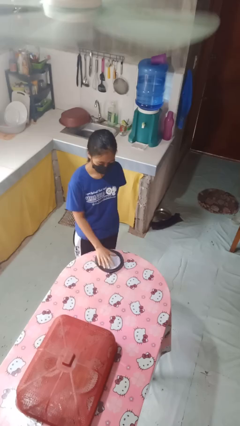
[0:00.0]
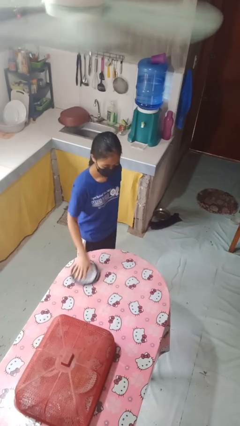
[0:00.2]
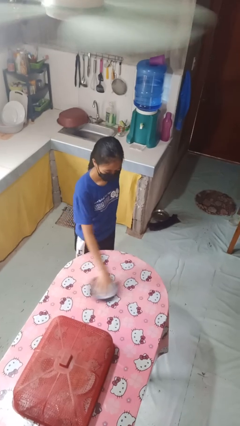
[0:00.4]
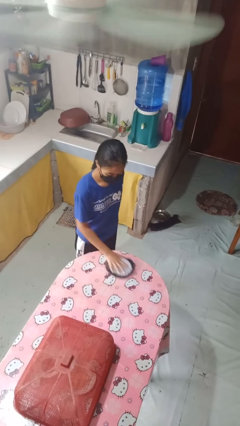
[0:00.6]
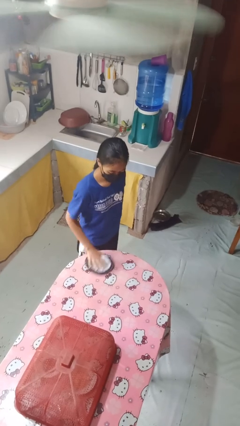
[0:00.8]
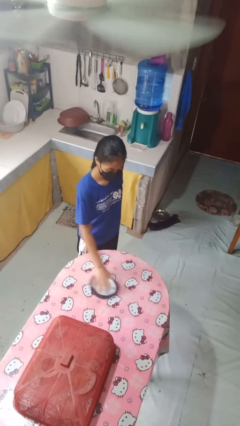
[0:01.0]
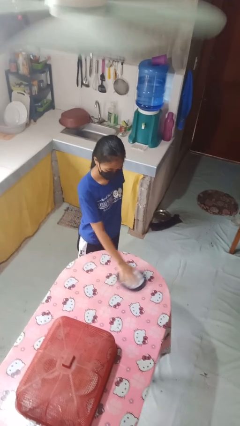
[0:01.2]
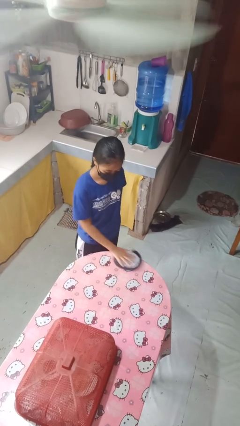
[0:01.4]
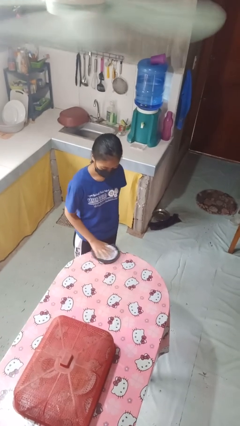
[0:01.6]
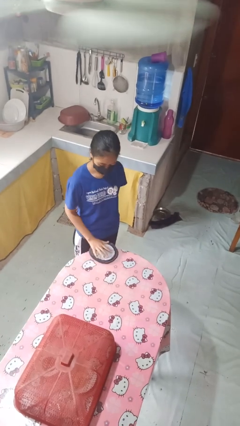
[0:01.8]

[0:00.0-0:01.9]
person cleans table with rag

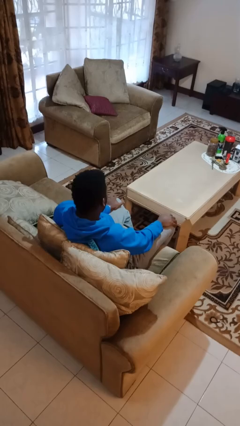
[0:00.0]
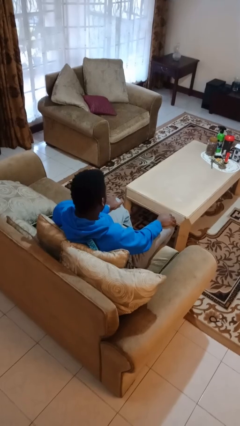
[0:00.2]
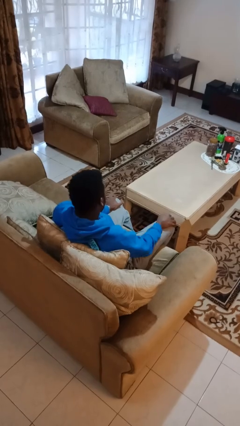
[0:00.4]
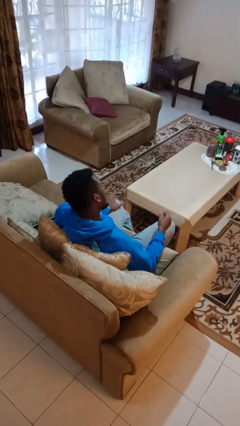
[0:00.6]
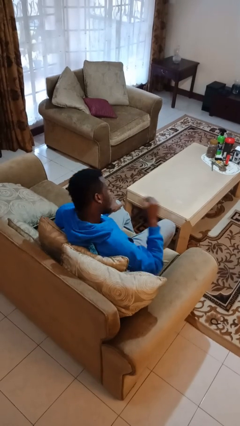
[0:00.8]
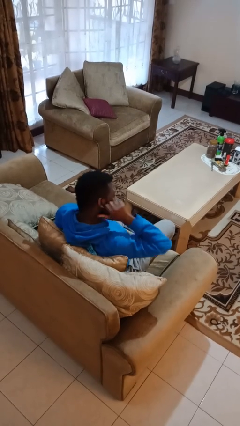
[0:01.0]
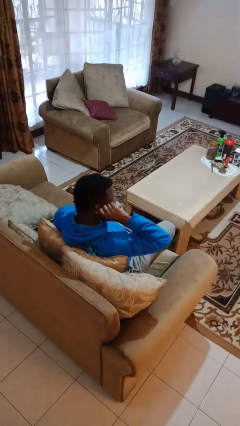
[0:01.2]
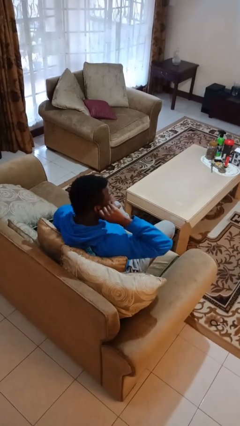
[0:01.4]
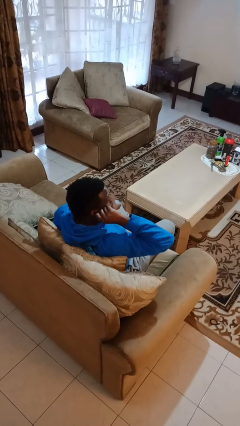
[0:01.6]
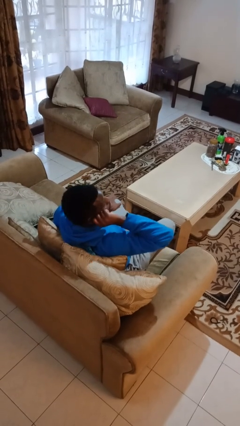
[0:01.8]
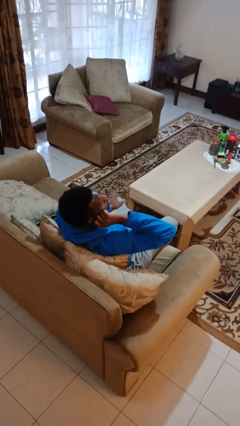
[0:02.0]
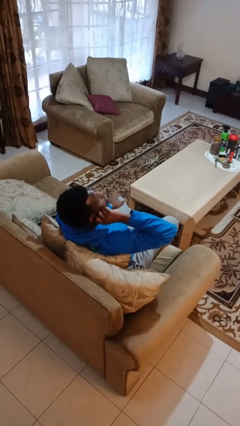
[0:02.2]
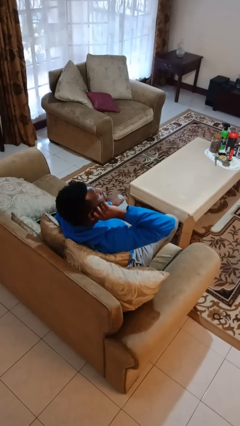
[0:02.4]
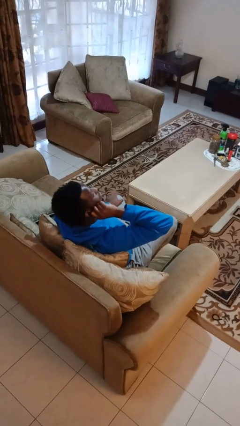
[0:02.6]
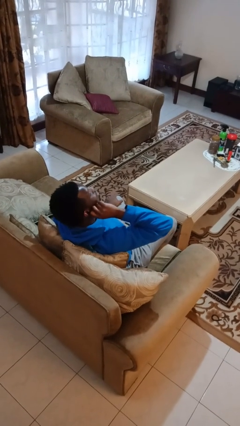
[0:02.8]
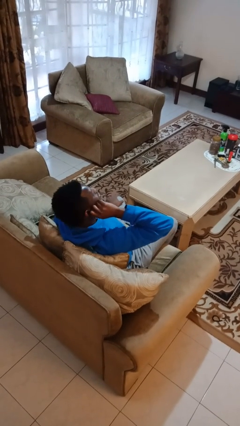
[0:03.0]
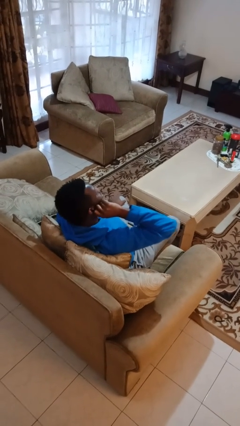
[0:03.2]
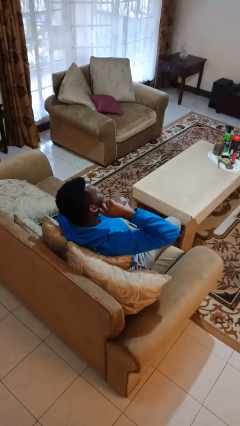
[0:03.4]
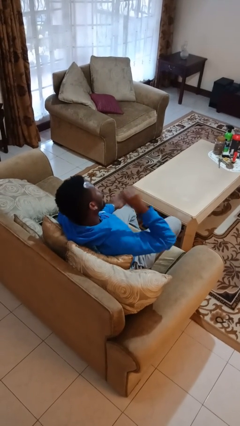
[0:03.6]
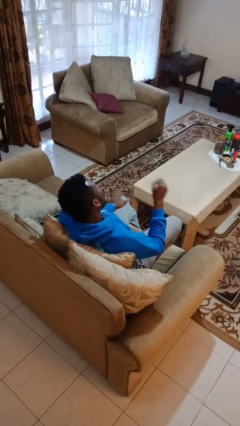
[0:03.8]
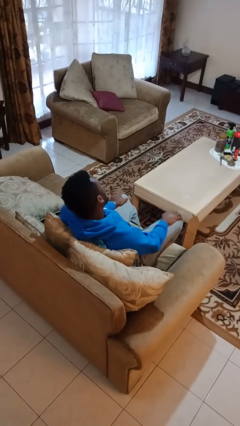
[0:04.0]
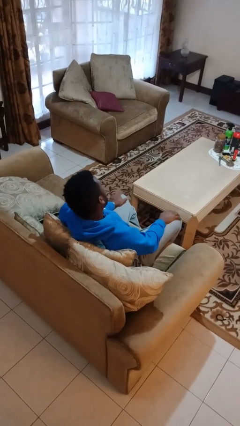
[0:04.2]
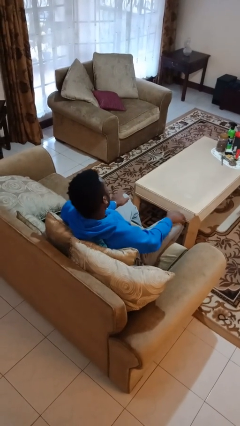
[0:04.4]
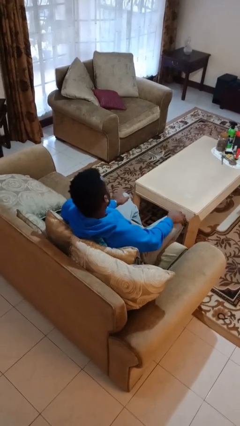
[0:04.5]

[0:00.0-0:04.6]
person touches earlobe

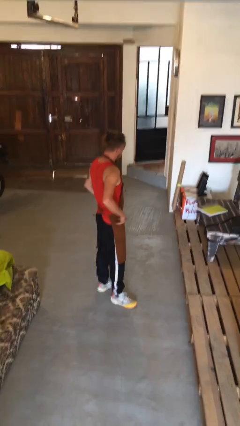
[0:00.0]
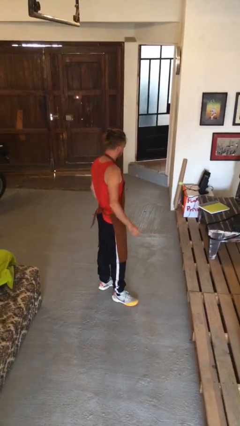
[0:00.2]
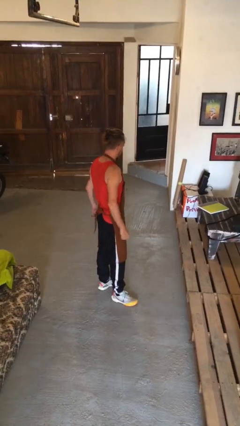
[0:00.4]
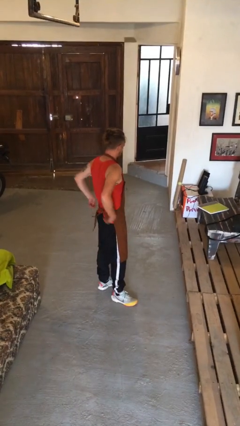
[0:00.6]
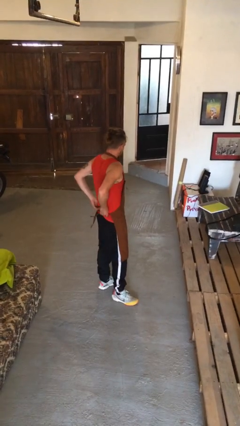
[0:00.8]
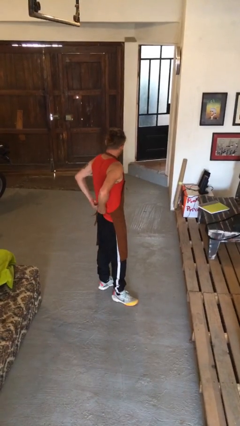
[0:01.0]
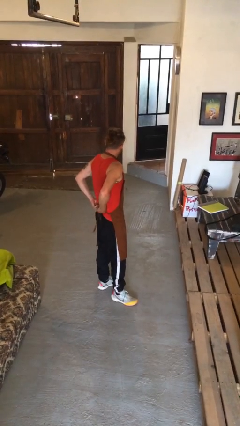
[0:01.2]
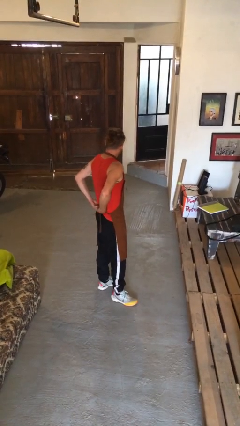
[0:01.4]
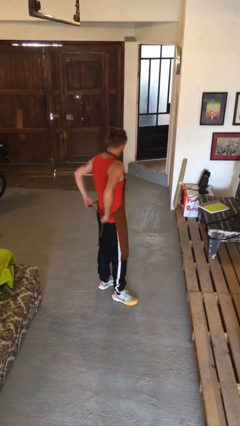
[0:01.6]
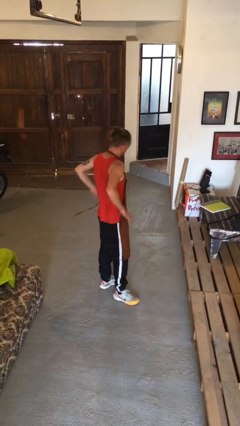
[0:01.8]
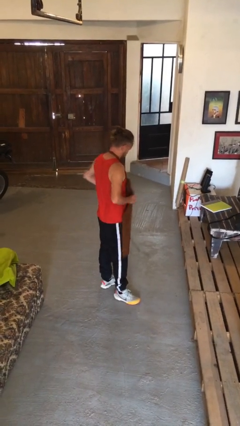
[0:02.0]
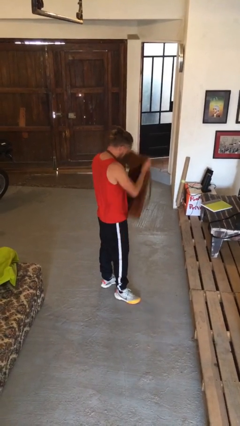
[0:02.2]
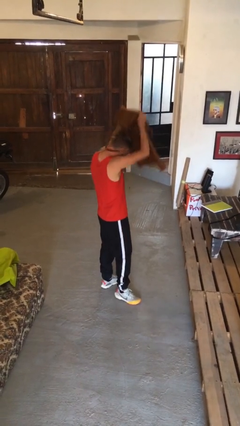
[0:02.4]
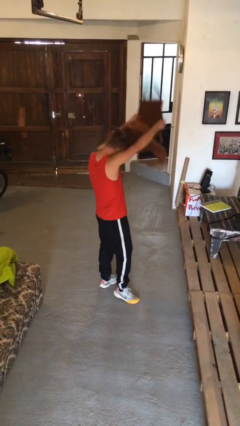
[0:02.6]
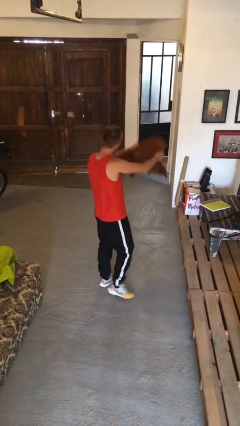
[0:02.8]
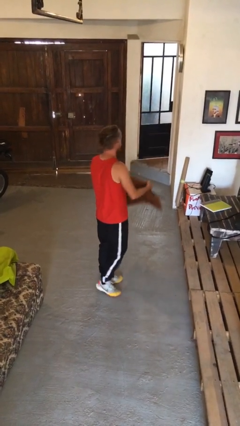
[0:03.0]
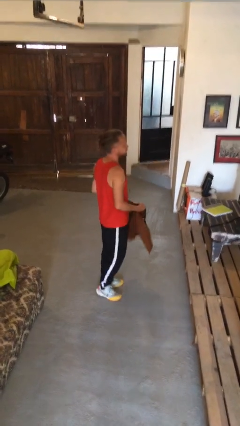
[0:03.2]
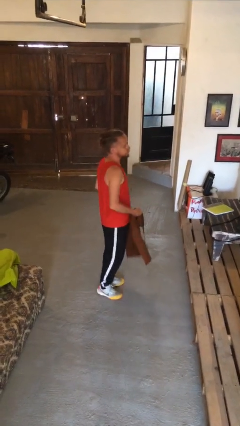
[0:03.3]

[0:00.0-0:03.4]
person takes off apron

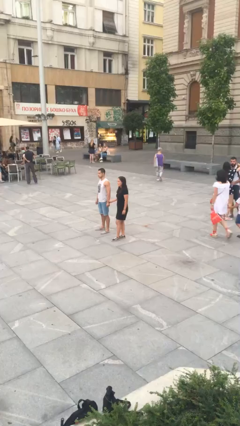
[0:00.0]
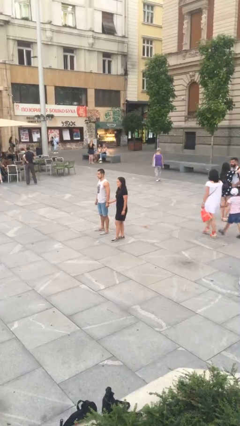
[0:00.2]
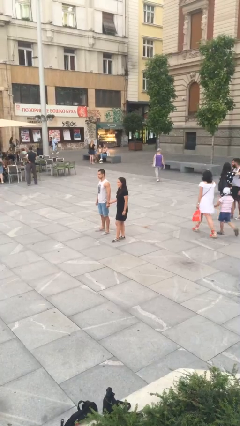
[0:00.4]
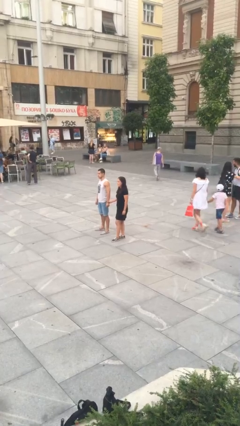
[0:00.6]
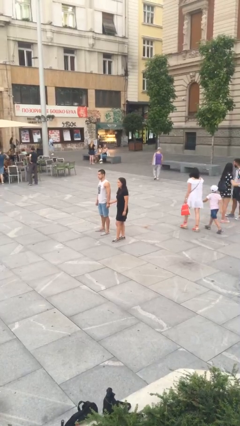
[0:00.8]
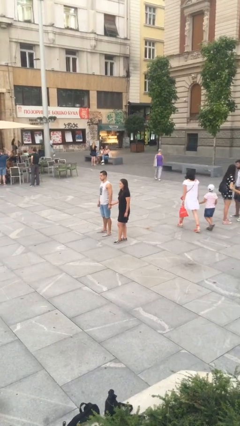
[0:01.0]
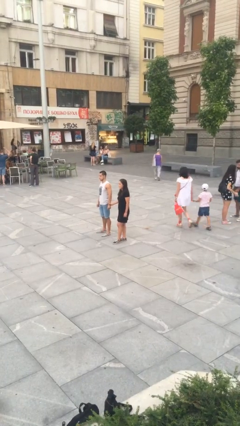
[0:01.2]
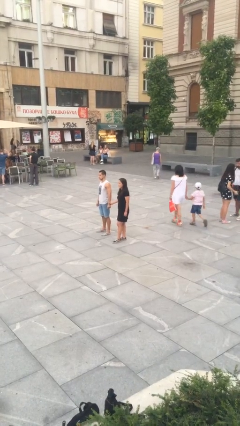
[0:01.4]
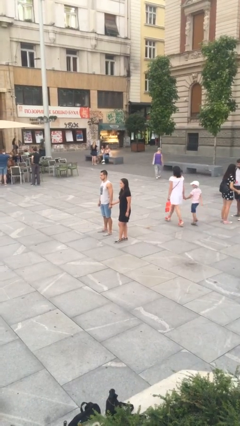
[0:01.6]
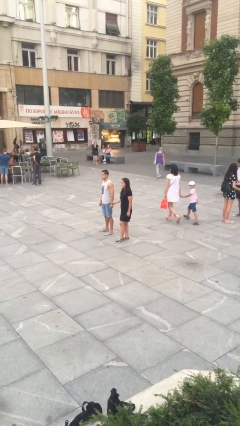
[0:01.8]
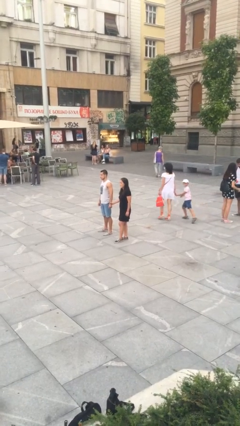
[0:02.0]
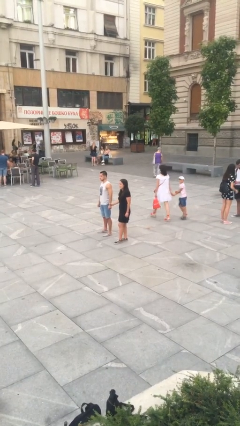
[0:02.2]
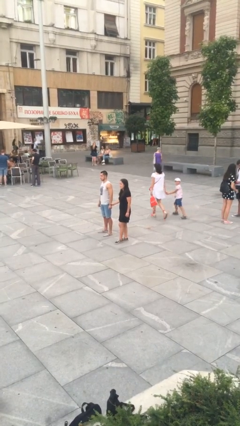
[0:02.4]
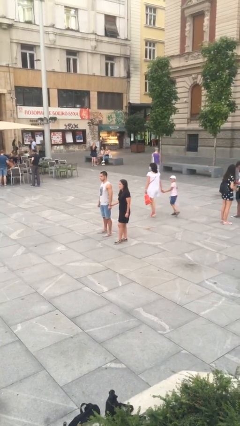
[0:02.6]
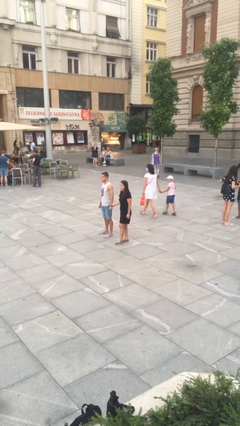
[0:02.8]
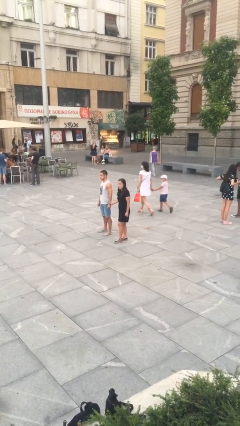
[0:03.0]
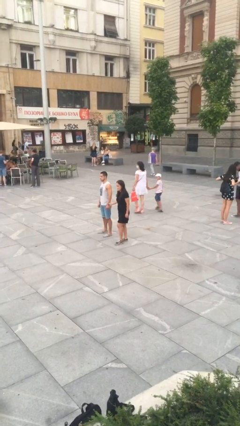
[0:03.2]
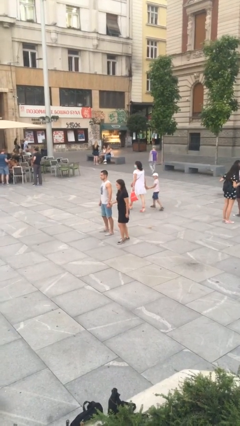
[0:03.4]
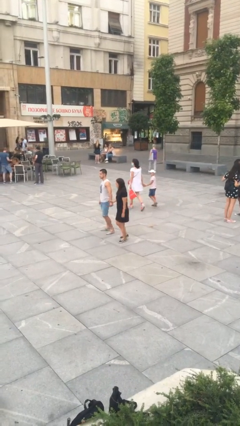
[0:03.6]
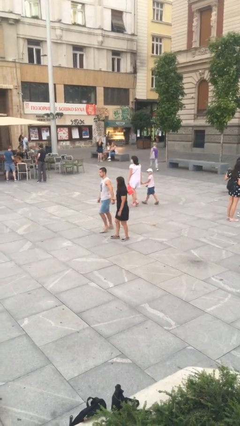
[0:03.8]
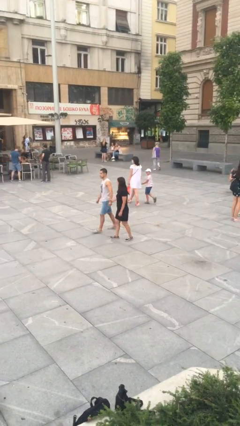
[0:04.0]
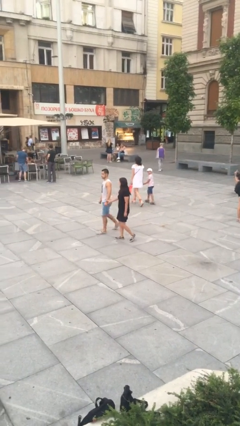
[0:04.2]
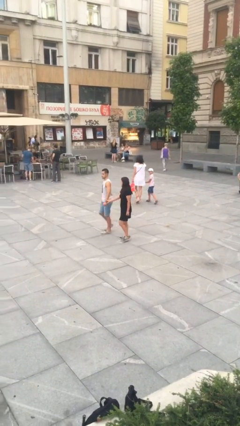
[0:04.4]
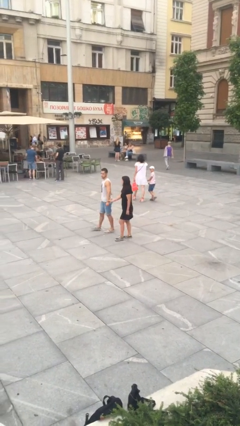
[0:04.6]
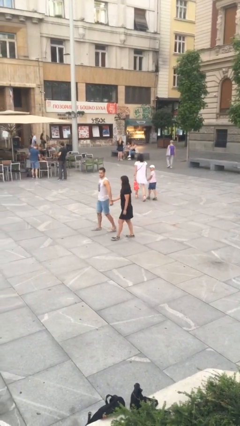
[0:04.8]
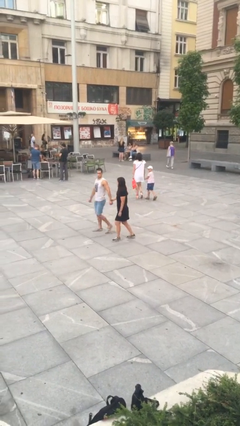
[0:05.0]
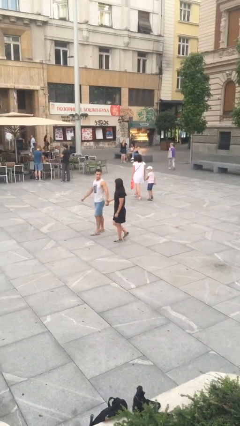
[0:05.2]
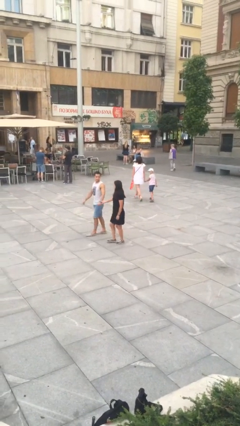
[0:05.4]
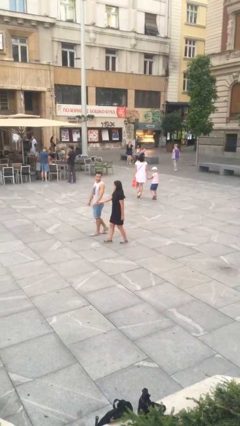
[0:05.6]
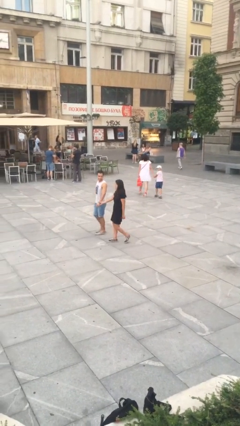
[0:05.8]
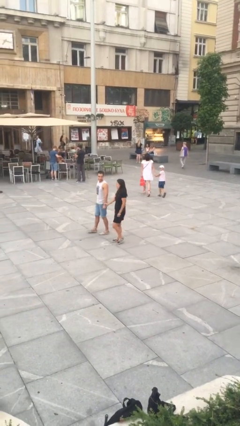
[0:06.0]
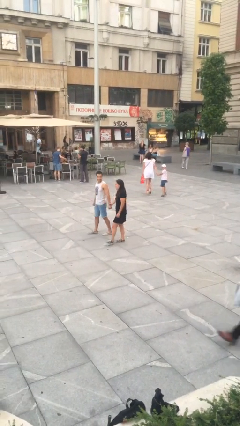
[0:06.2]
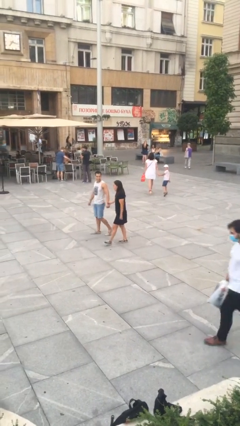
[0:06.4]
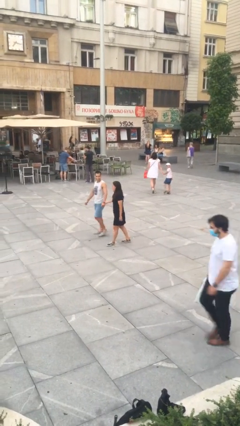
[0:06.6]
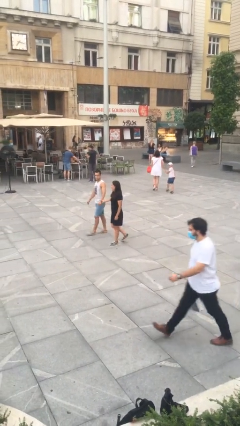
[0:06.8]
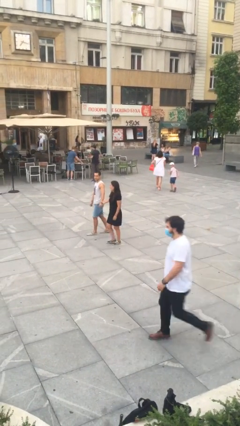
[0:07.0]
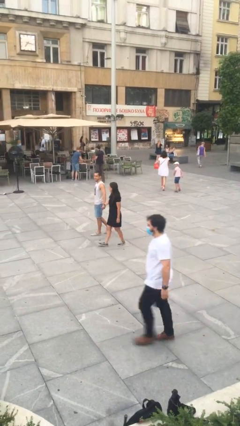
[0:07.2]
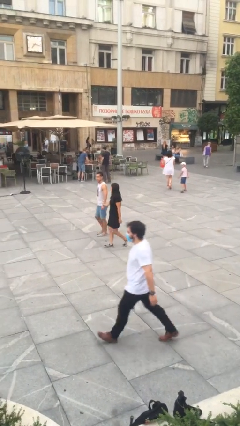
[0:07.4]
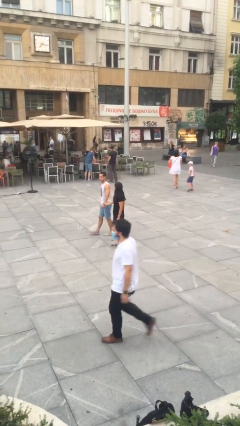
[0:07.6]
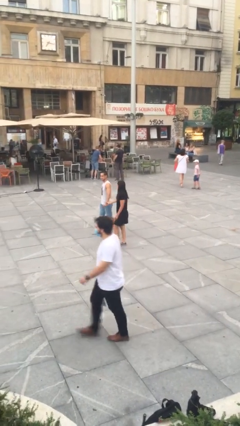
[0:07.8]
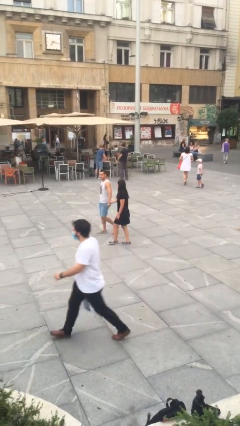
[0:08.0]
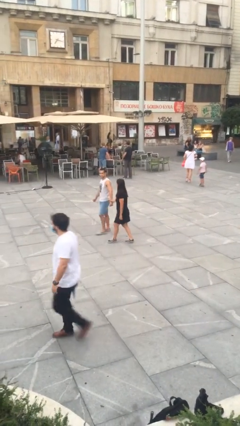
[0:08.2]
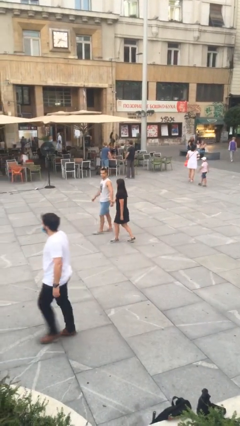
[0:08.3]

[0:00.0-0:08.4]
person holds hand
